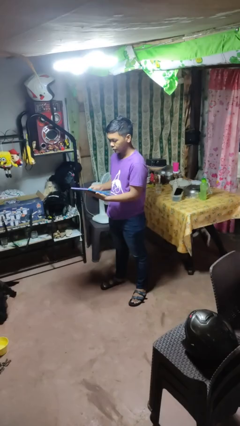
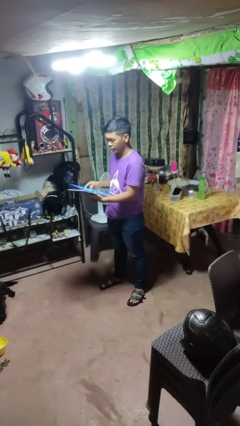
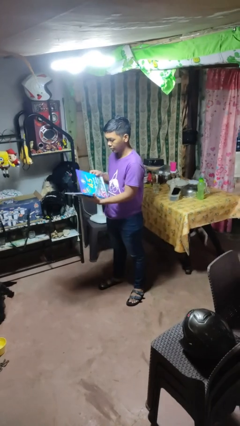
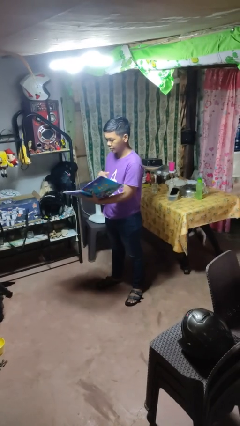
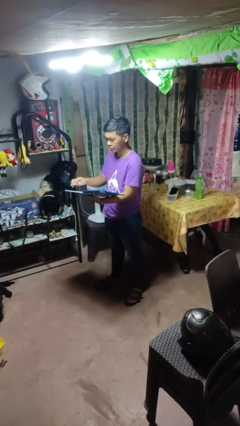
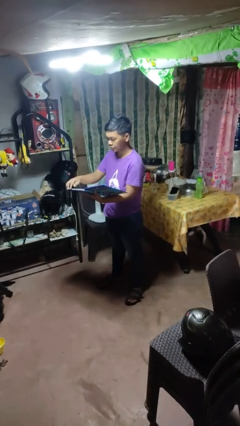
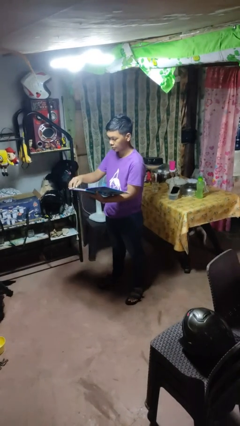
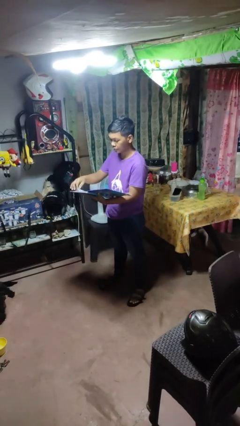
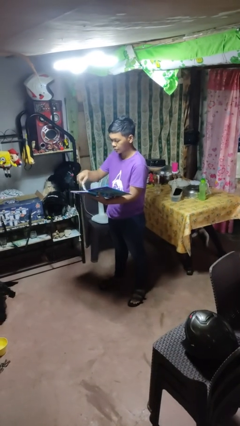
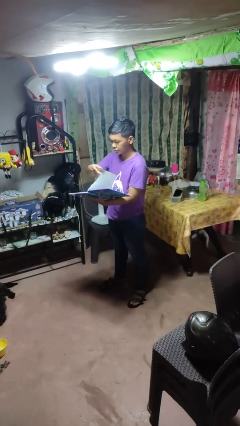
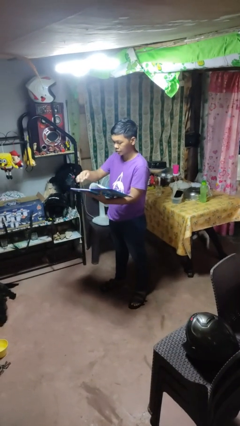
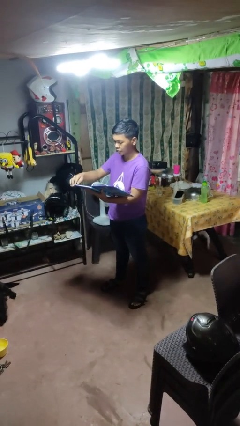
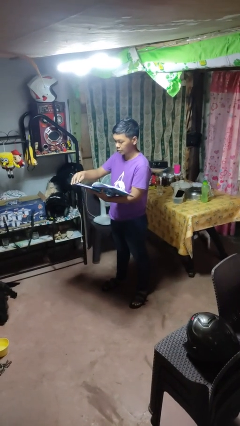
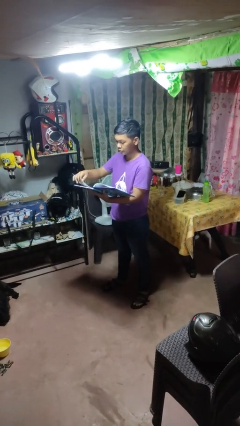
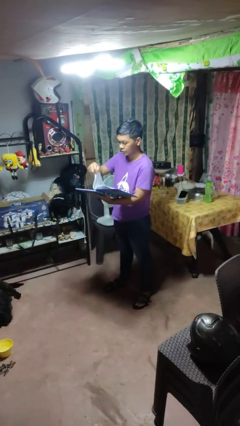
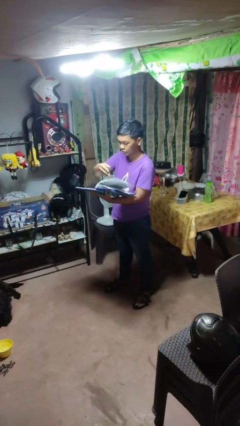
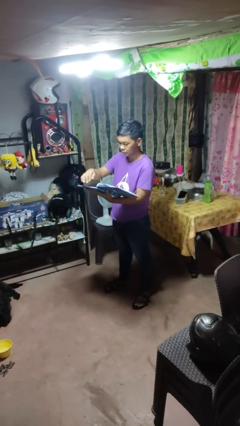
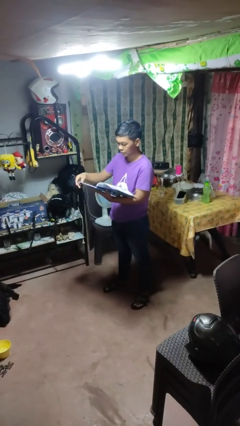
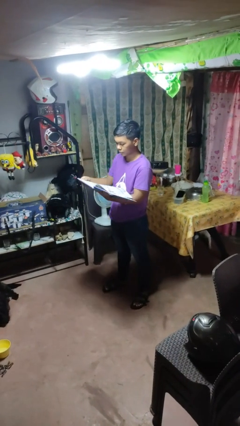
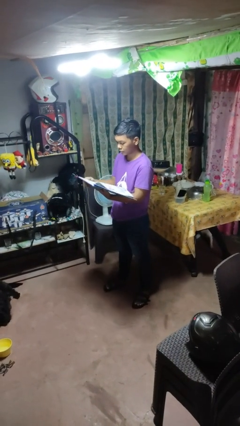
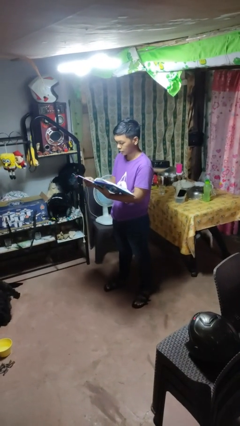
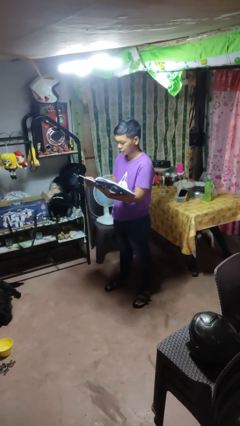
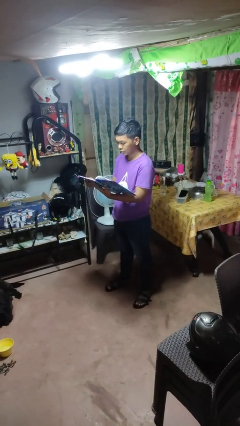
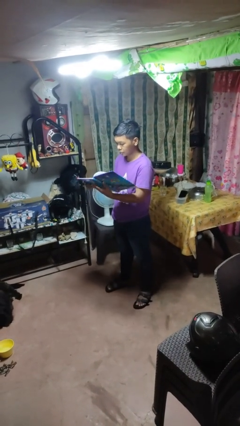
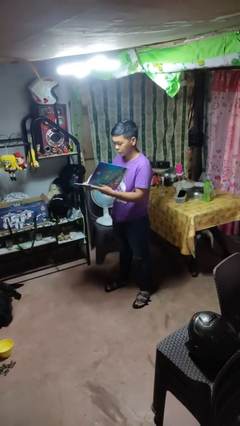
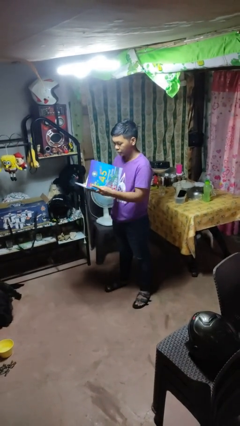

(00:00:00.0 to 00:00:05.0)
person reads magazine

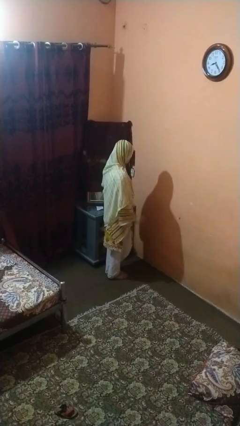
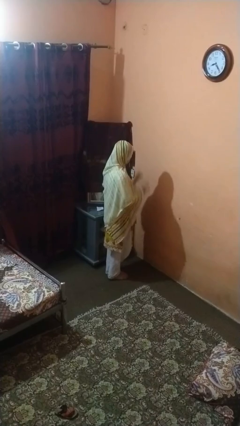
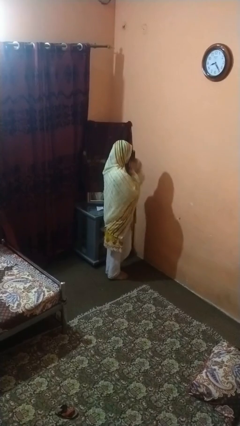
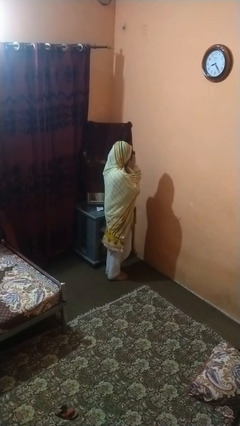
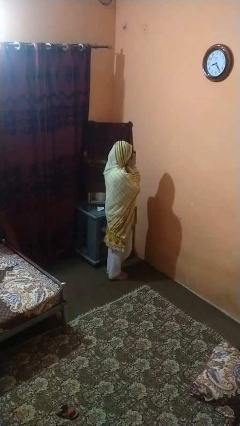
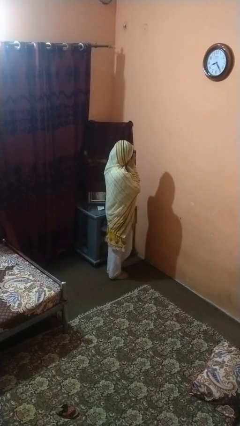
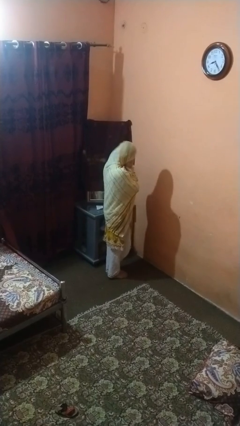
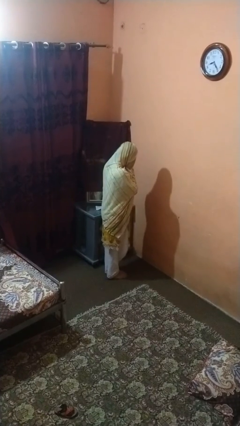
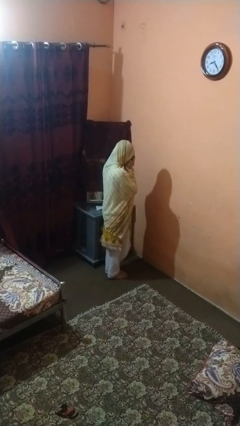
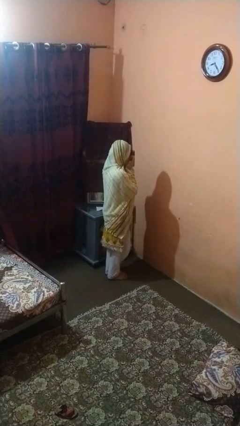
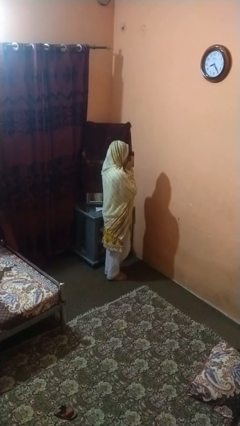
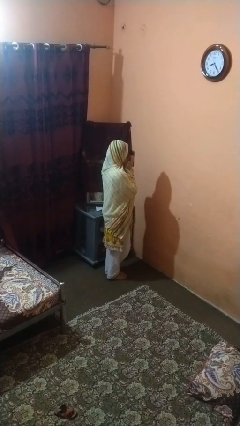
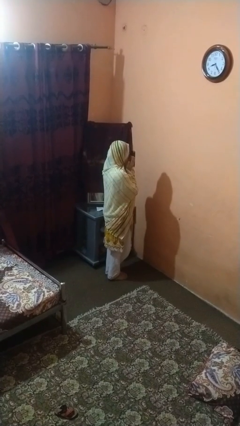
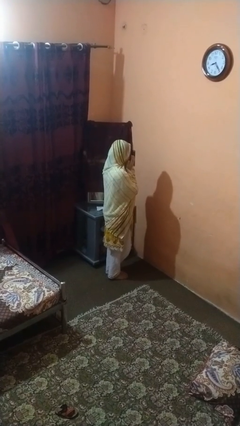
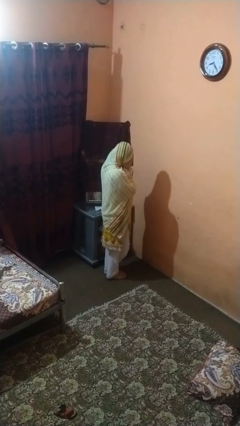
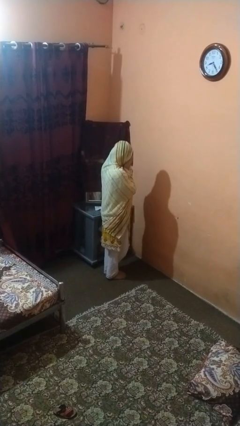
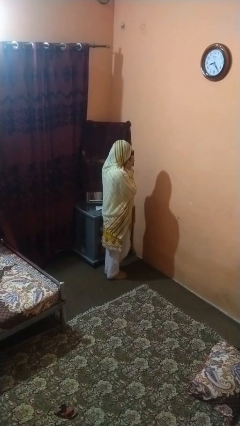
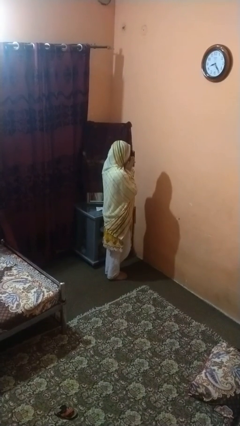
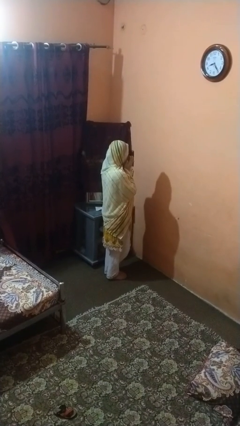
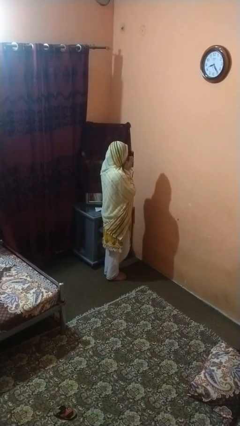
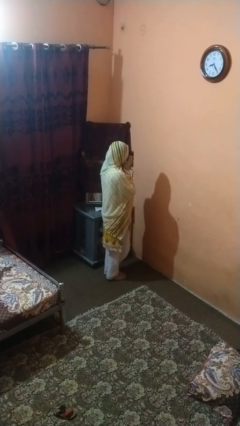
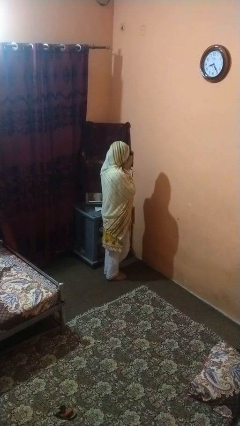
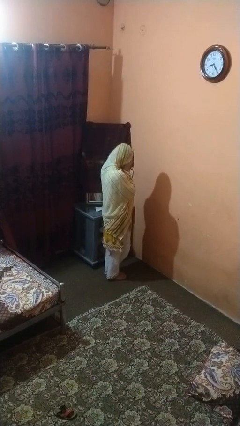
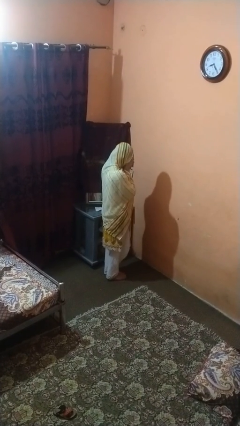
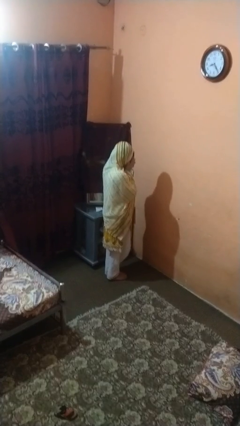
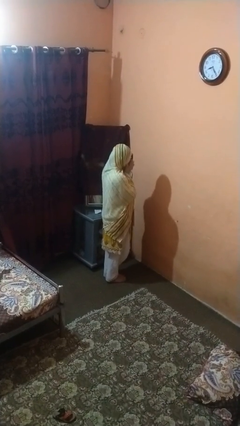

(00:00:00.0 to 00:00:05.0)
person sneezes into hand

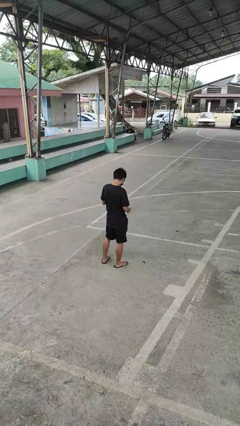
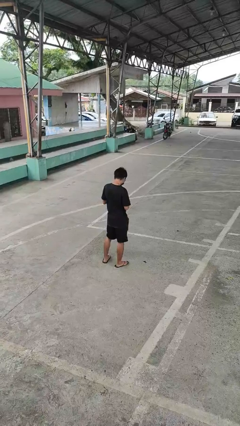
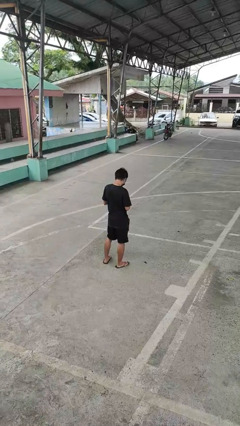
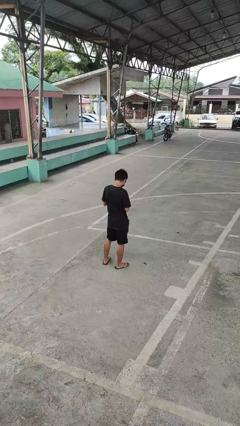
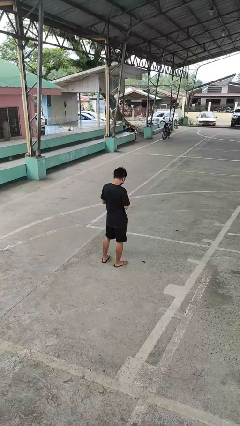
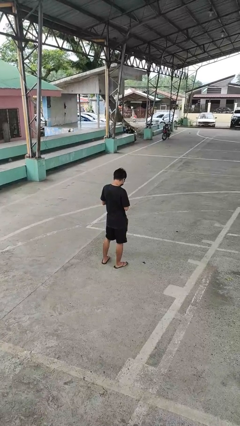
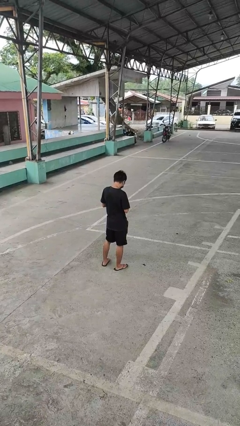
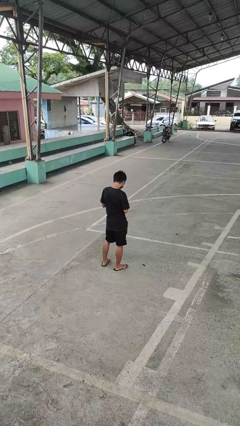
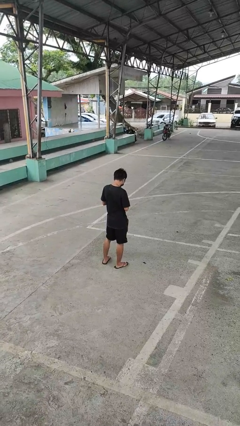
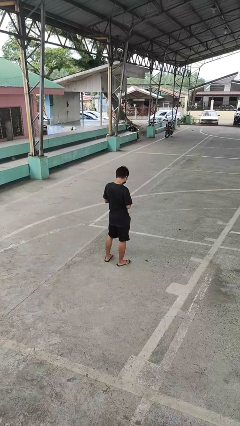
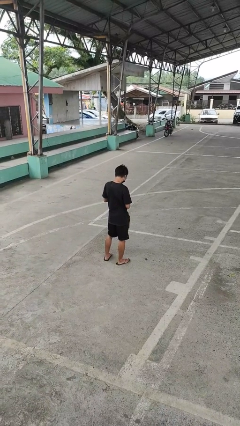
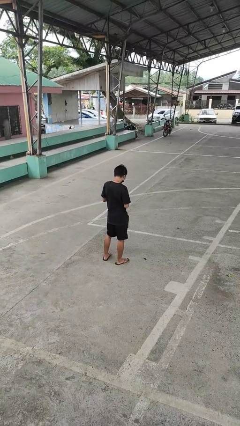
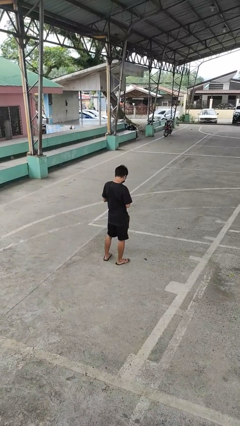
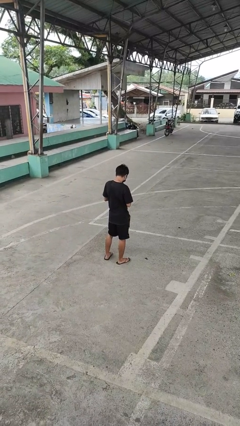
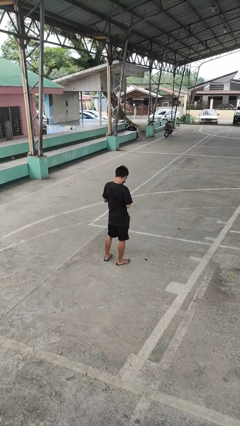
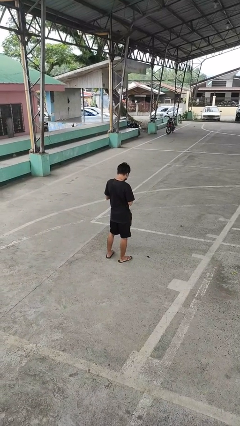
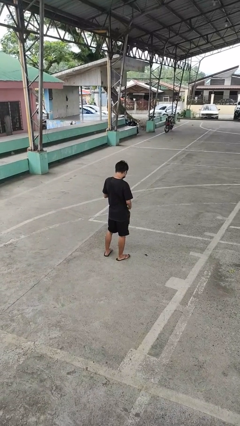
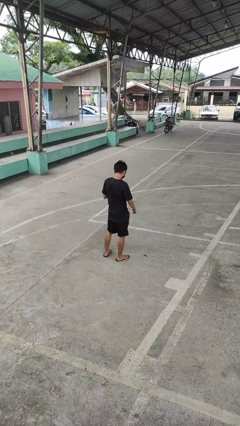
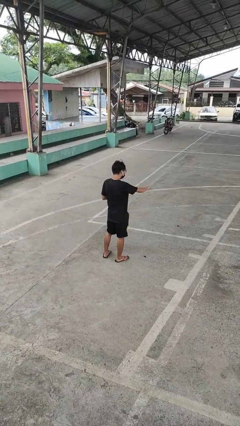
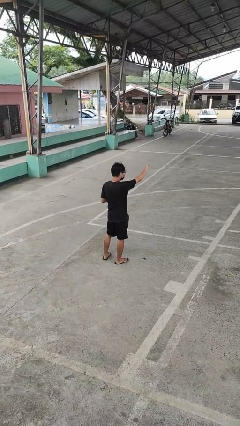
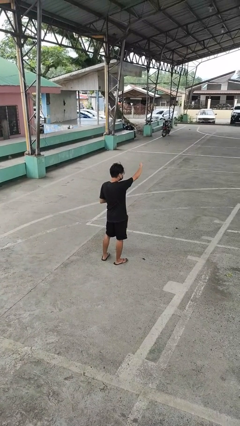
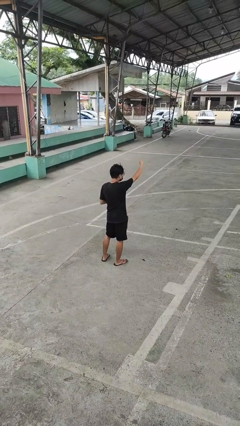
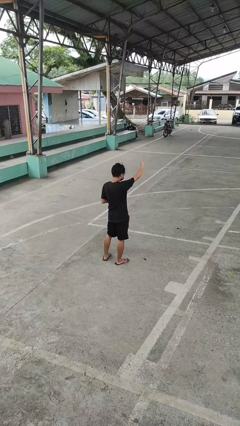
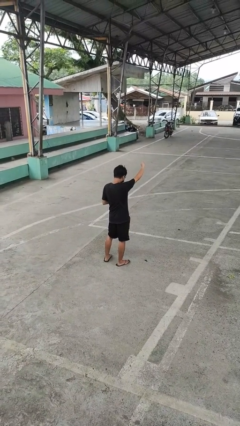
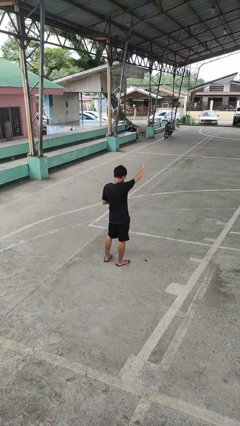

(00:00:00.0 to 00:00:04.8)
person gestures thumbs down

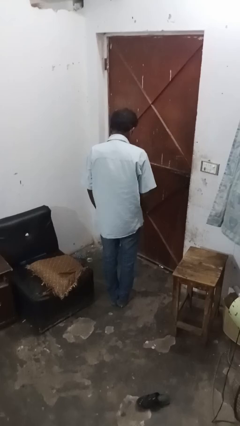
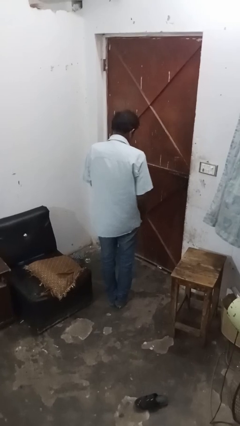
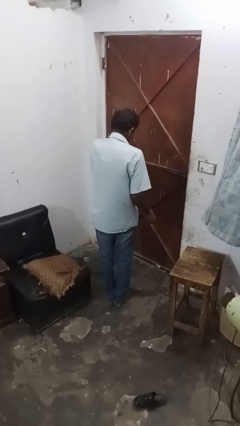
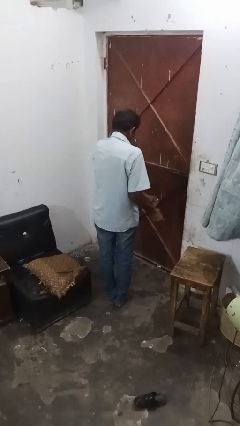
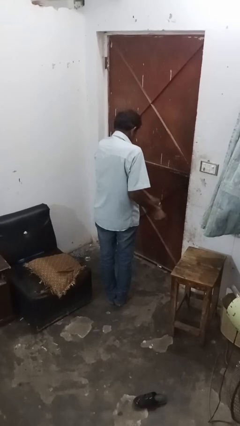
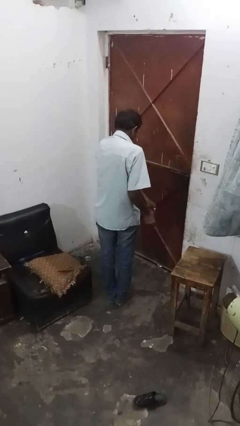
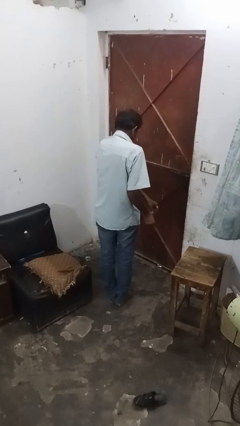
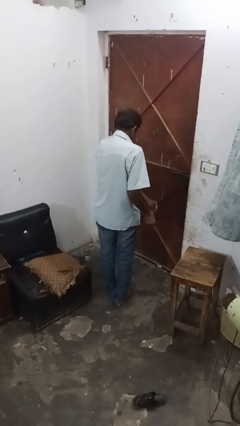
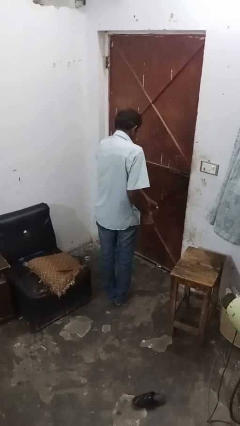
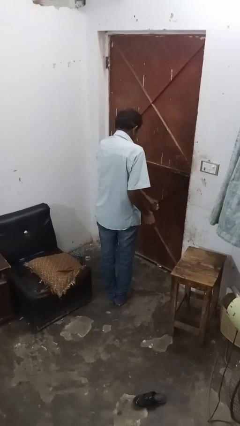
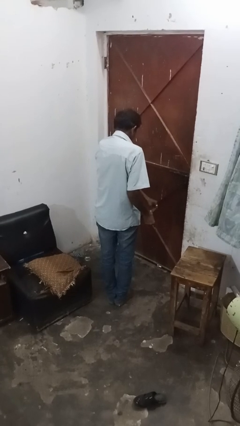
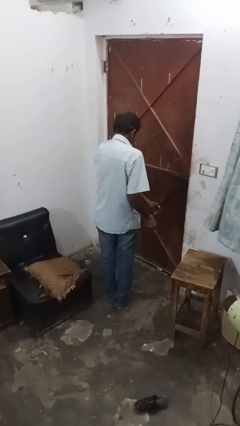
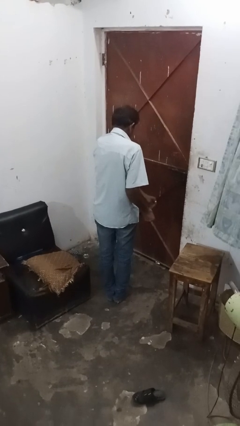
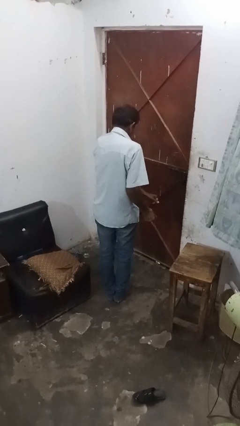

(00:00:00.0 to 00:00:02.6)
person snaps fingers

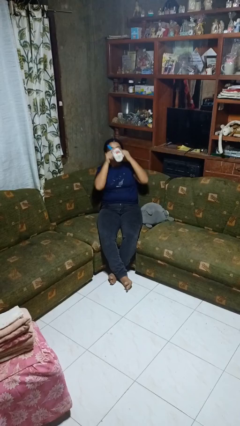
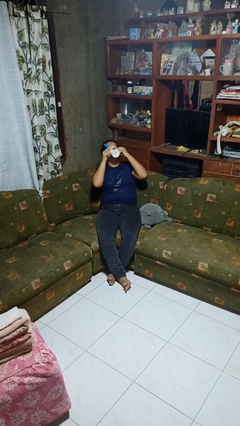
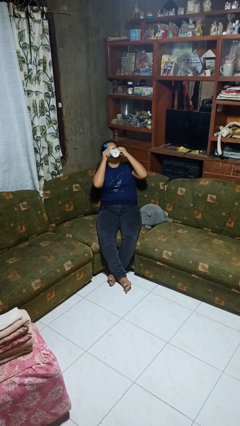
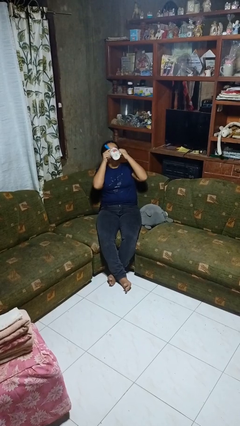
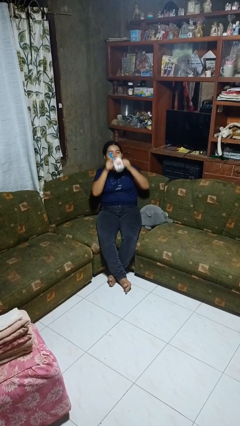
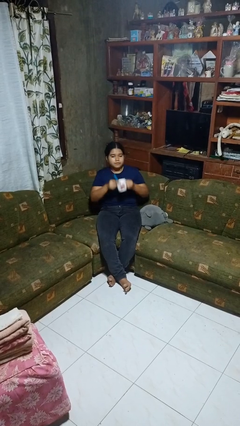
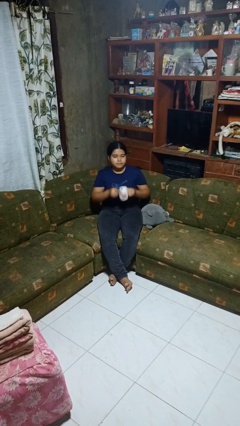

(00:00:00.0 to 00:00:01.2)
person drinks from mug
